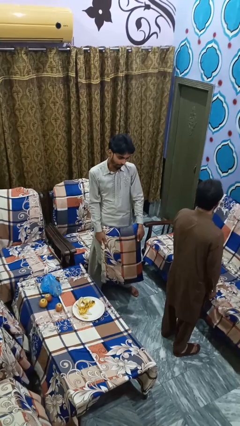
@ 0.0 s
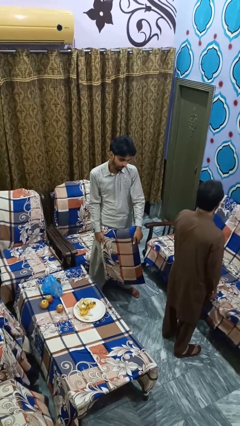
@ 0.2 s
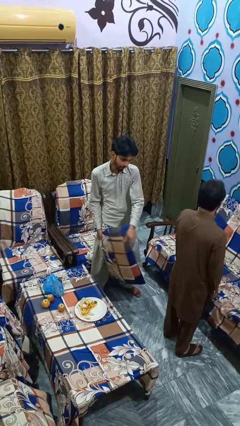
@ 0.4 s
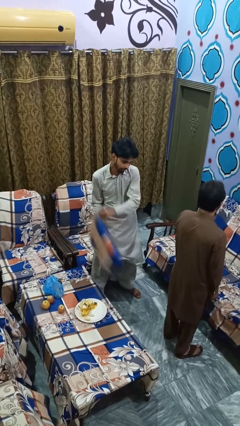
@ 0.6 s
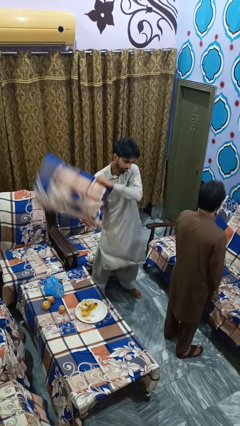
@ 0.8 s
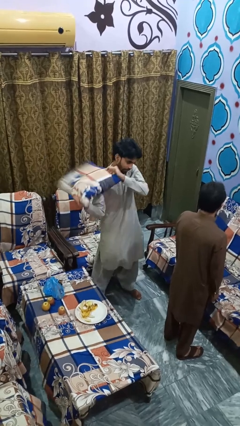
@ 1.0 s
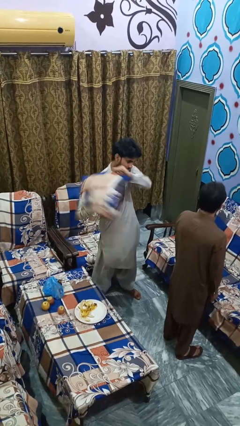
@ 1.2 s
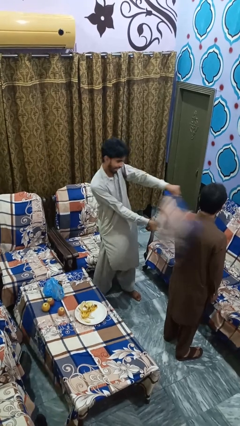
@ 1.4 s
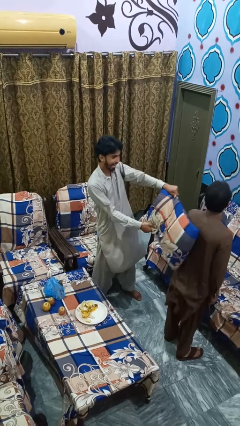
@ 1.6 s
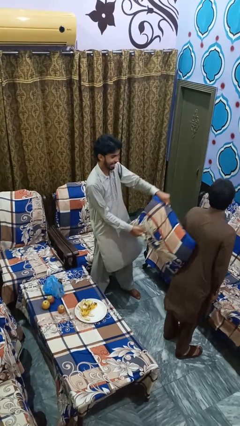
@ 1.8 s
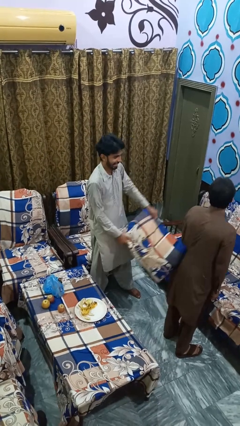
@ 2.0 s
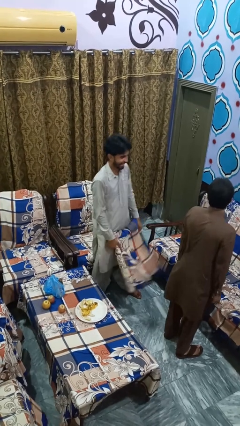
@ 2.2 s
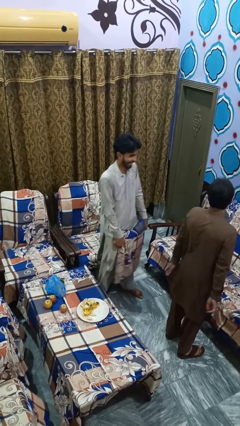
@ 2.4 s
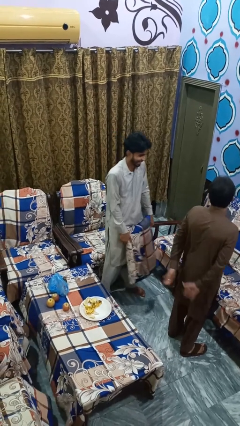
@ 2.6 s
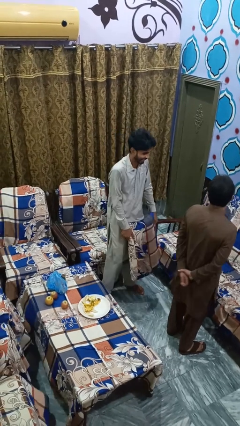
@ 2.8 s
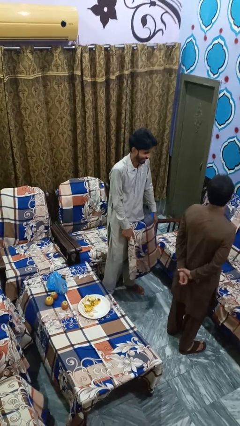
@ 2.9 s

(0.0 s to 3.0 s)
person hits person with pillow

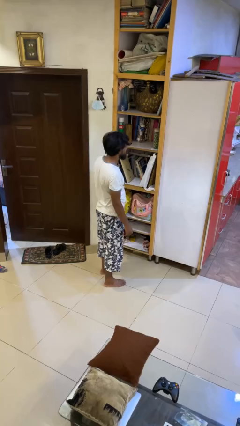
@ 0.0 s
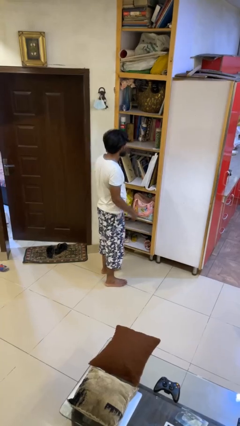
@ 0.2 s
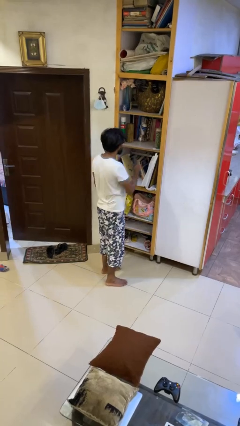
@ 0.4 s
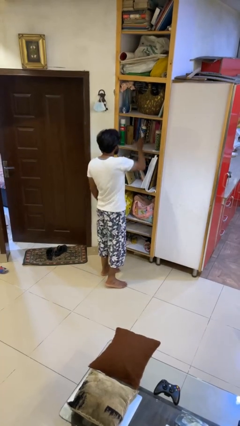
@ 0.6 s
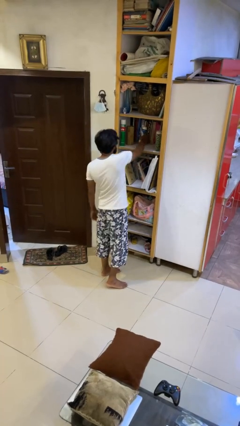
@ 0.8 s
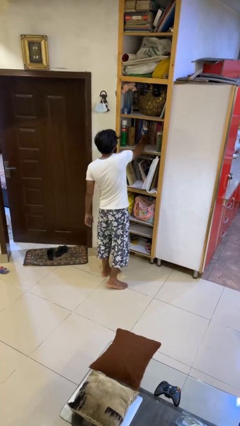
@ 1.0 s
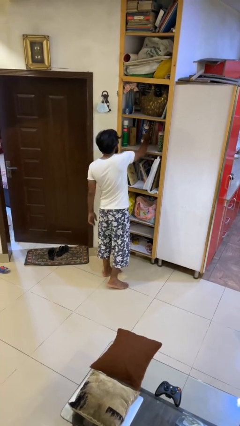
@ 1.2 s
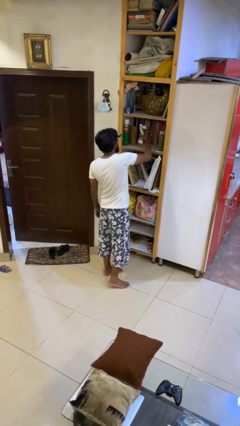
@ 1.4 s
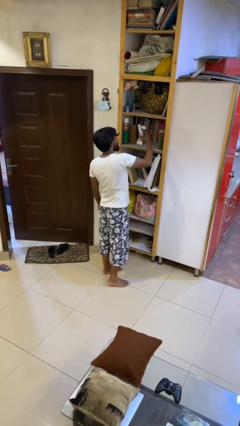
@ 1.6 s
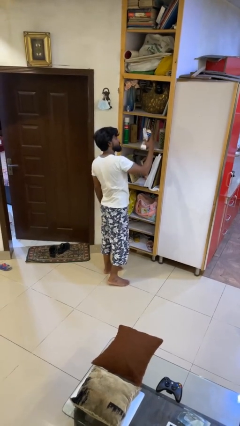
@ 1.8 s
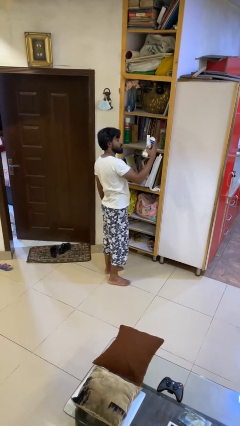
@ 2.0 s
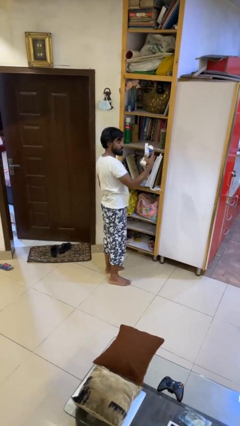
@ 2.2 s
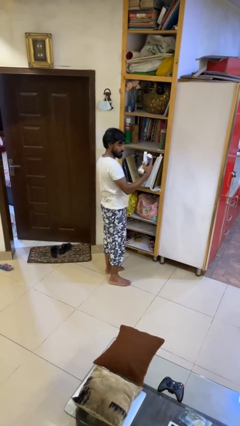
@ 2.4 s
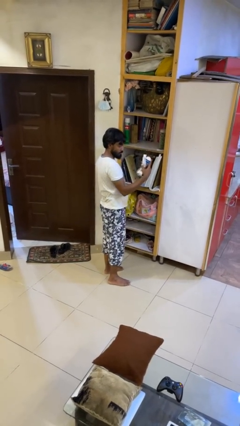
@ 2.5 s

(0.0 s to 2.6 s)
person picks up object from cabinet

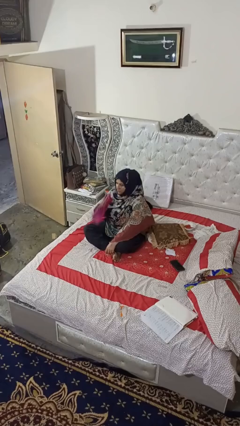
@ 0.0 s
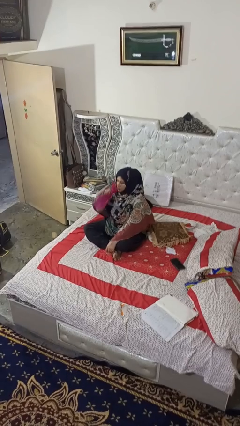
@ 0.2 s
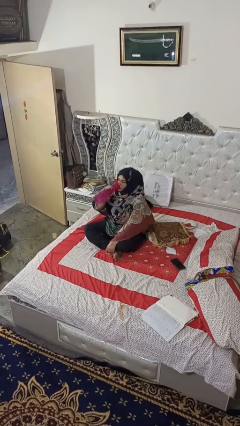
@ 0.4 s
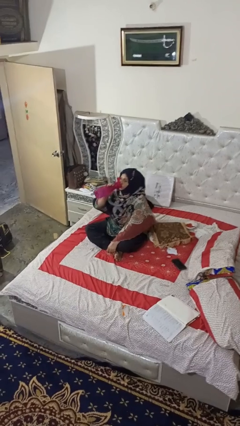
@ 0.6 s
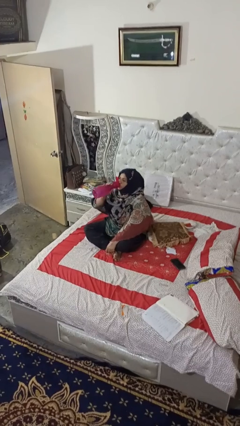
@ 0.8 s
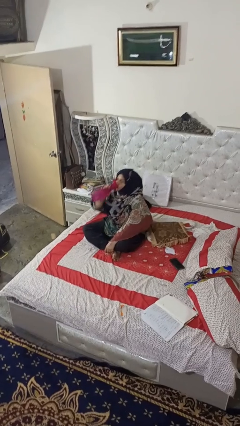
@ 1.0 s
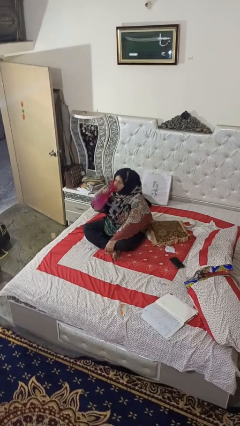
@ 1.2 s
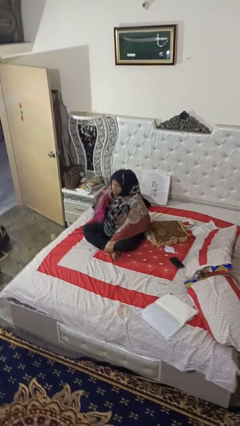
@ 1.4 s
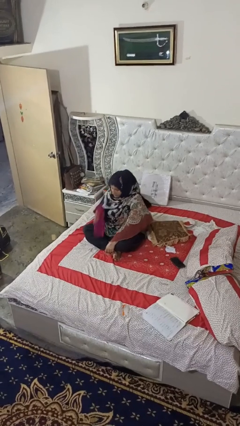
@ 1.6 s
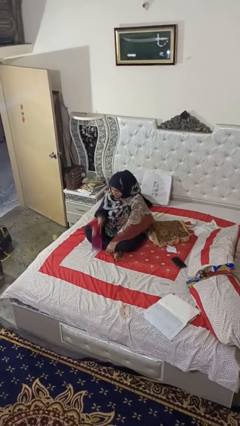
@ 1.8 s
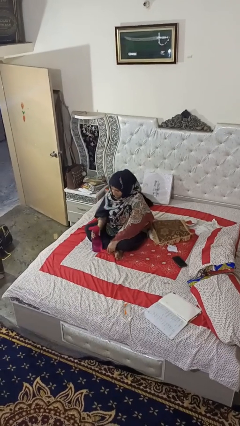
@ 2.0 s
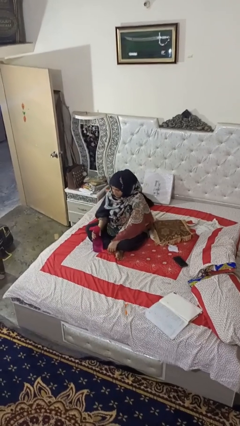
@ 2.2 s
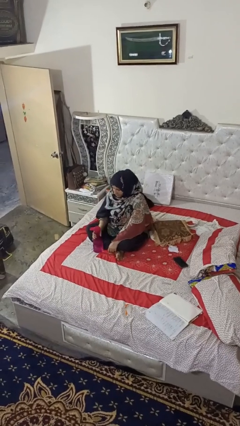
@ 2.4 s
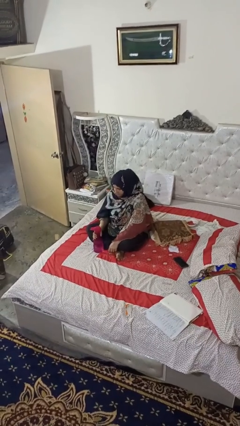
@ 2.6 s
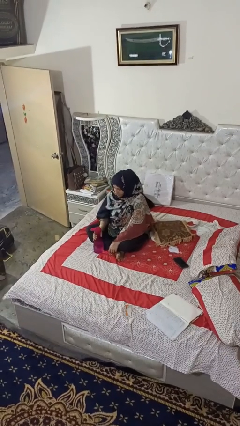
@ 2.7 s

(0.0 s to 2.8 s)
person drinks from bottle

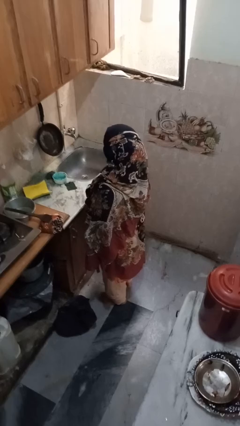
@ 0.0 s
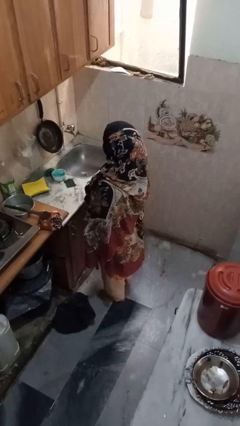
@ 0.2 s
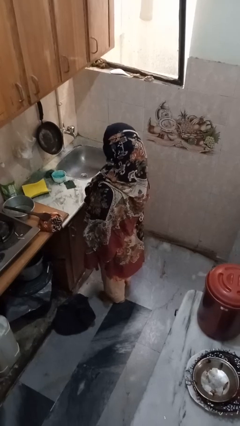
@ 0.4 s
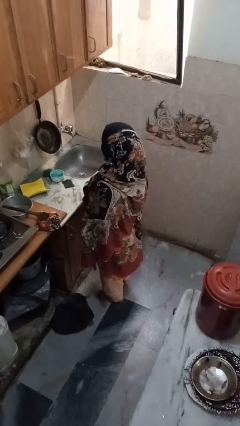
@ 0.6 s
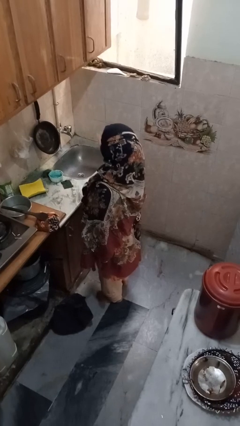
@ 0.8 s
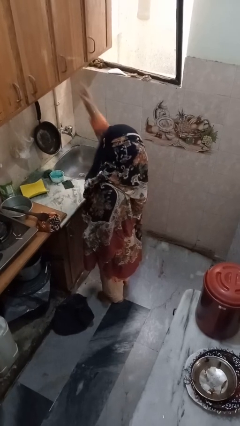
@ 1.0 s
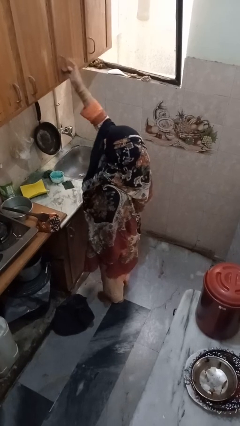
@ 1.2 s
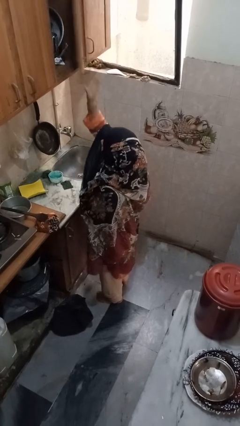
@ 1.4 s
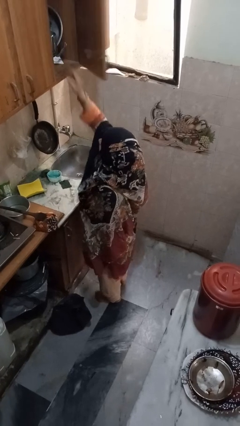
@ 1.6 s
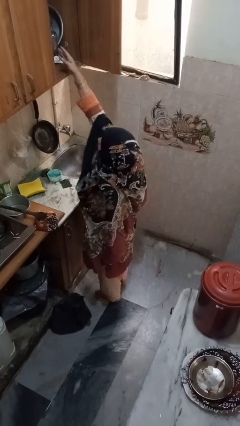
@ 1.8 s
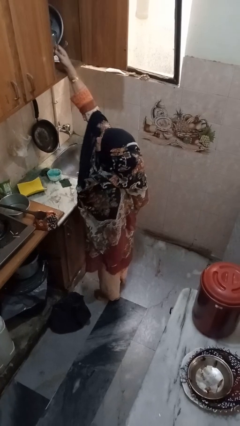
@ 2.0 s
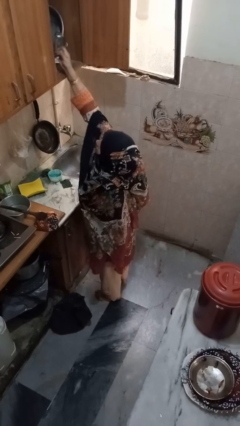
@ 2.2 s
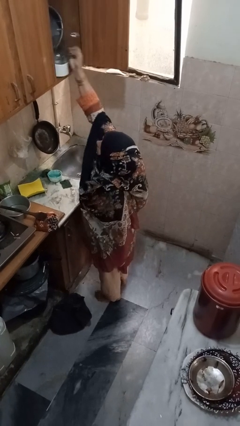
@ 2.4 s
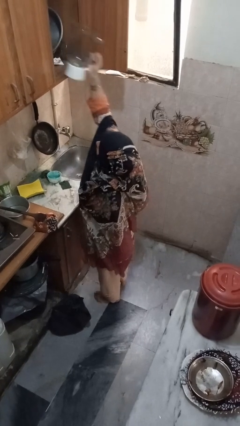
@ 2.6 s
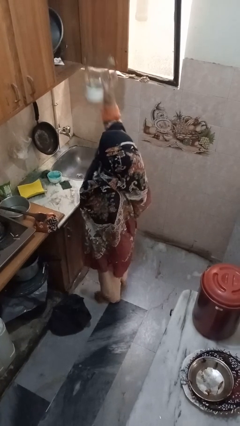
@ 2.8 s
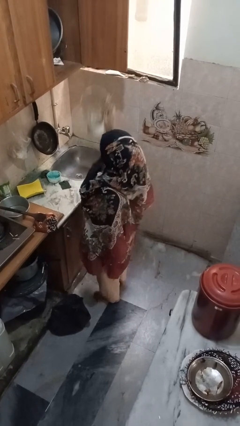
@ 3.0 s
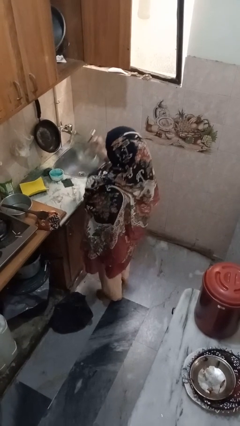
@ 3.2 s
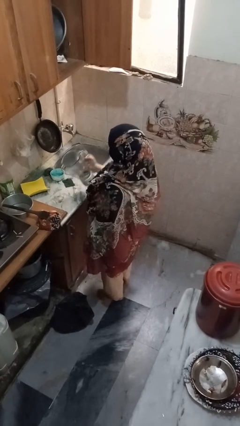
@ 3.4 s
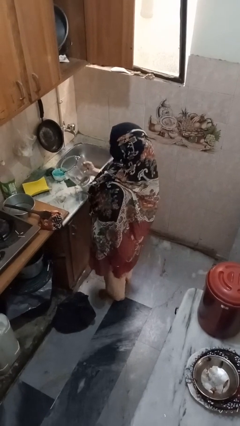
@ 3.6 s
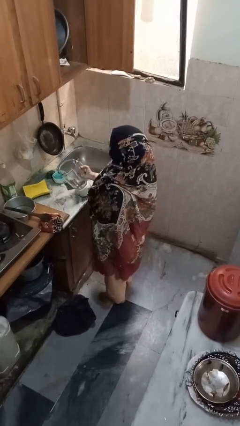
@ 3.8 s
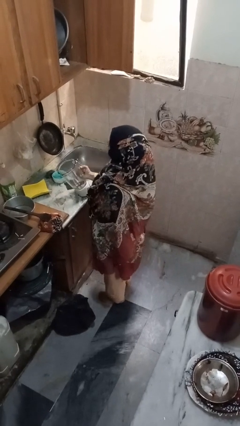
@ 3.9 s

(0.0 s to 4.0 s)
person puts object in cabinet

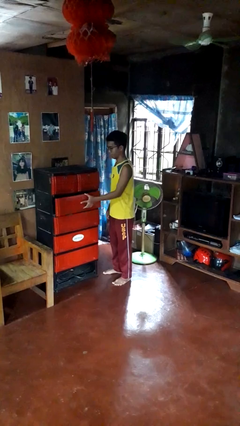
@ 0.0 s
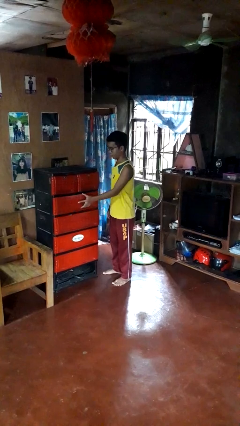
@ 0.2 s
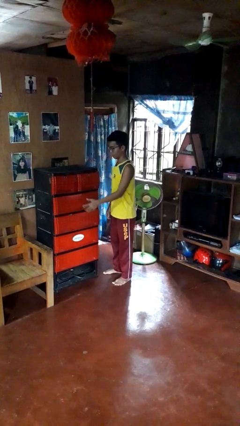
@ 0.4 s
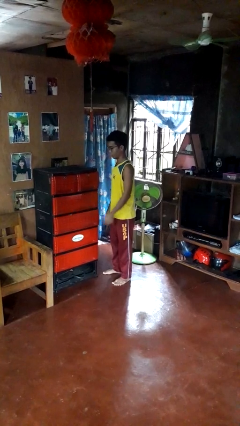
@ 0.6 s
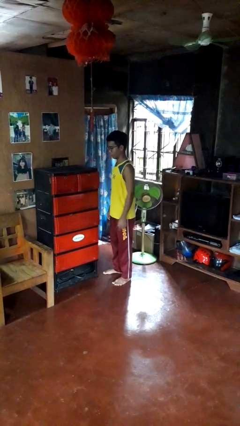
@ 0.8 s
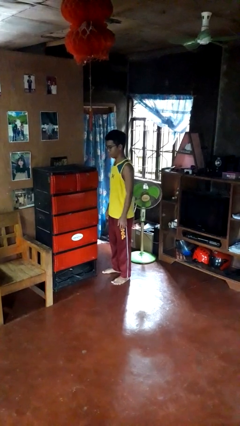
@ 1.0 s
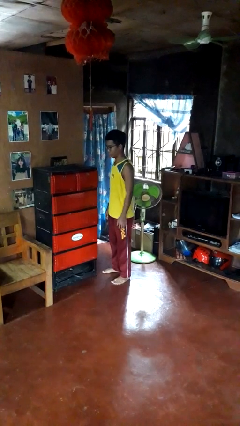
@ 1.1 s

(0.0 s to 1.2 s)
person closes dresser drawer

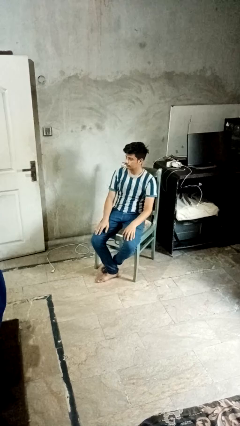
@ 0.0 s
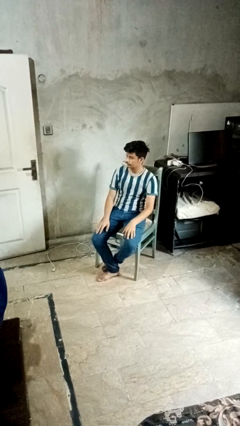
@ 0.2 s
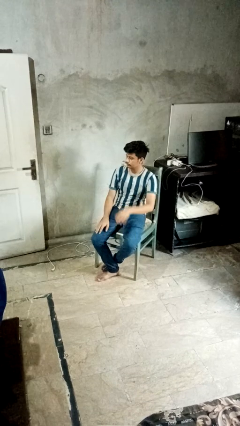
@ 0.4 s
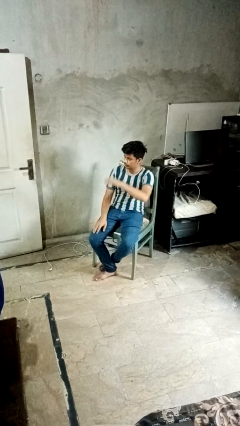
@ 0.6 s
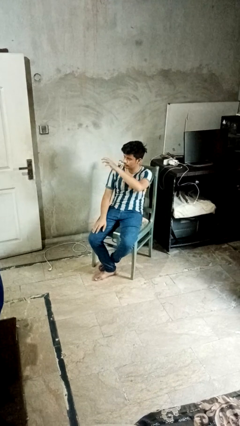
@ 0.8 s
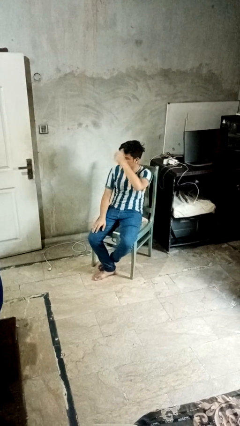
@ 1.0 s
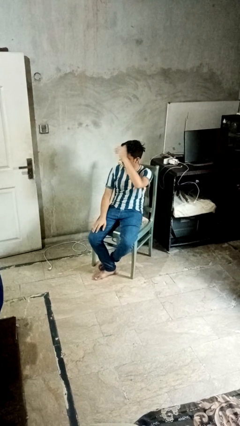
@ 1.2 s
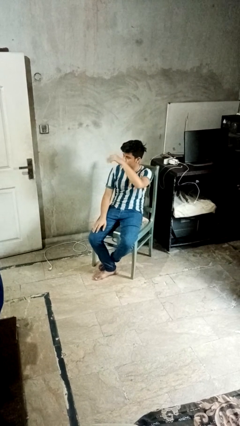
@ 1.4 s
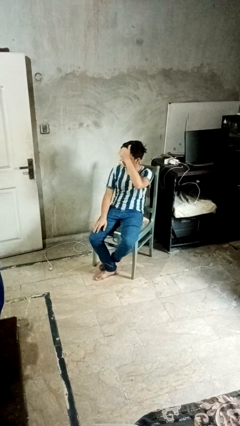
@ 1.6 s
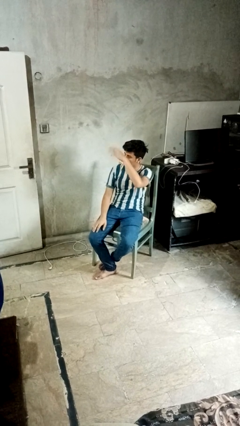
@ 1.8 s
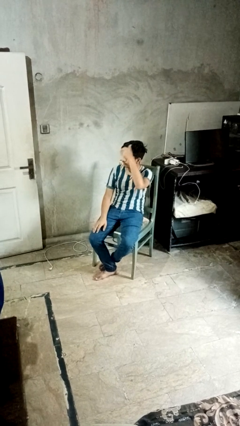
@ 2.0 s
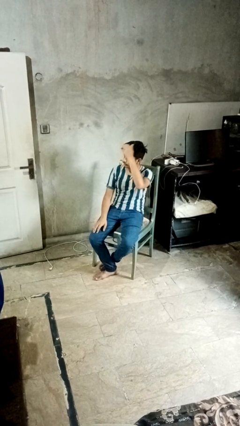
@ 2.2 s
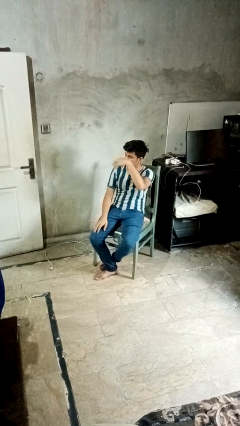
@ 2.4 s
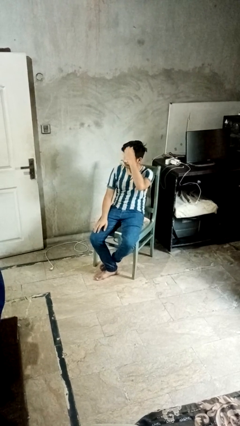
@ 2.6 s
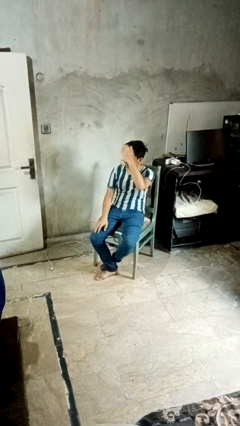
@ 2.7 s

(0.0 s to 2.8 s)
person gestures come here

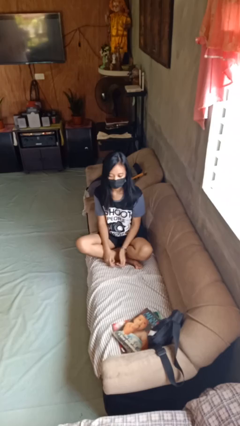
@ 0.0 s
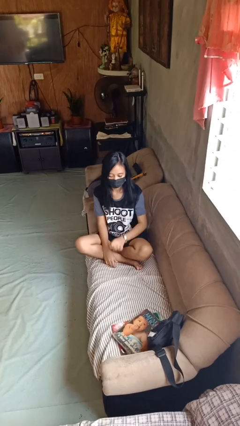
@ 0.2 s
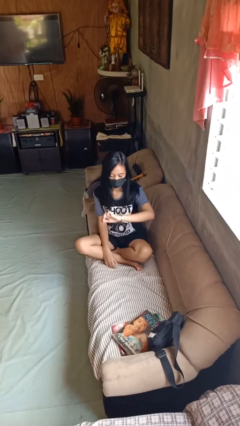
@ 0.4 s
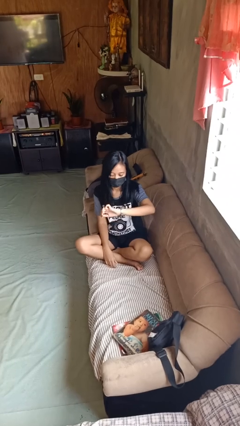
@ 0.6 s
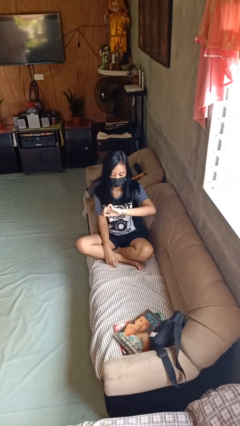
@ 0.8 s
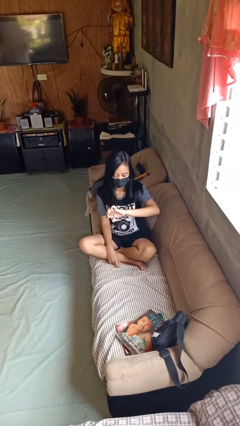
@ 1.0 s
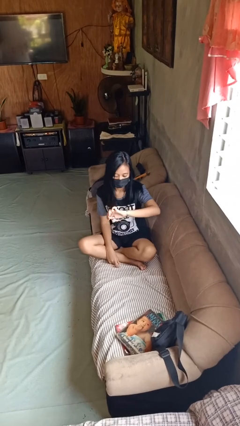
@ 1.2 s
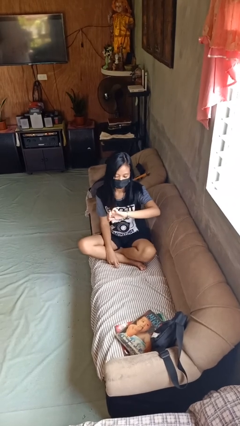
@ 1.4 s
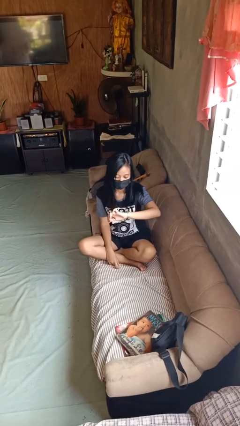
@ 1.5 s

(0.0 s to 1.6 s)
person looks at wristwatch
